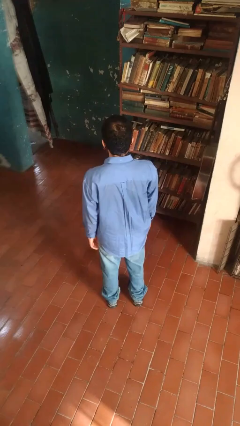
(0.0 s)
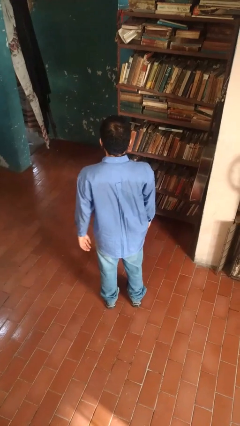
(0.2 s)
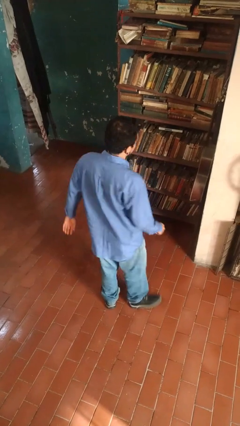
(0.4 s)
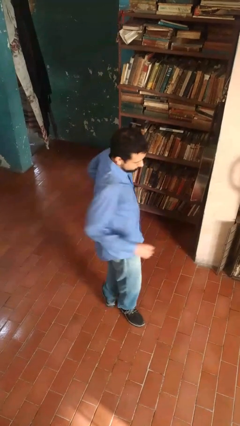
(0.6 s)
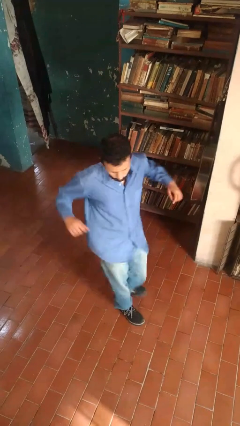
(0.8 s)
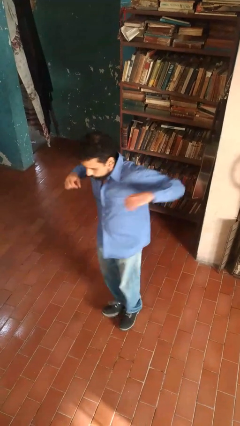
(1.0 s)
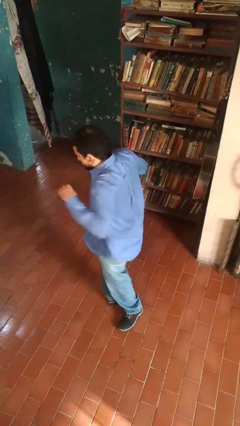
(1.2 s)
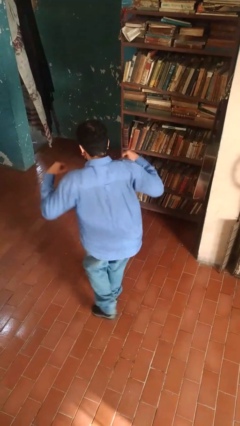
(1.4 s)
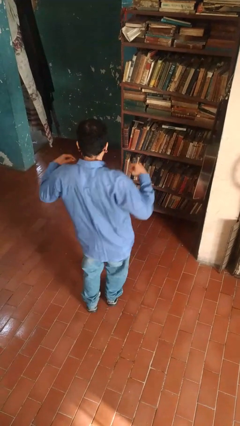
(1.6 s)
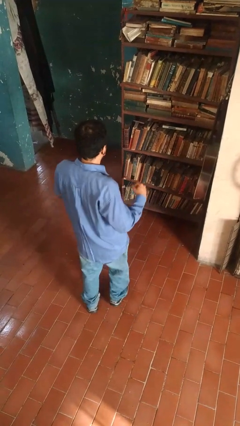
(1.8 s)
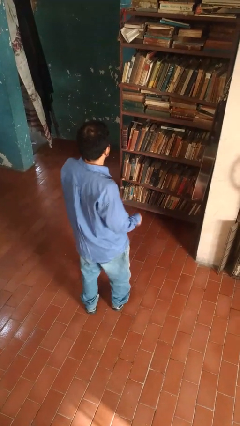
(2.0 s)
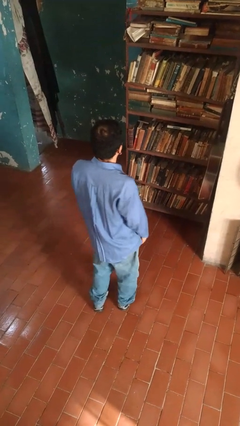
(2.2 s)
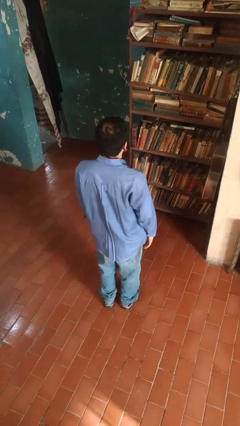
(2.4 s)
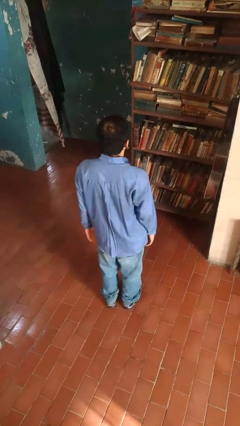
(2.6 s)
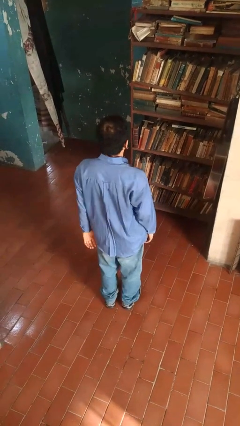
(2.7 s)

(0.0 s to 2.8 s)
person twirls

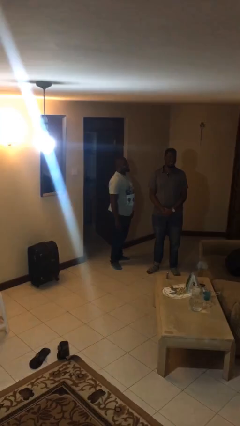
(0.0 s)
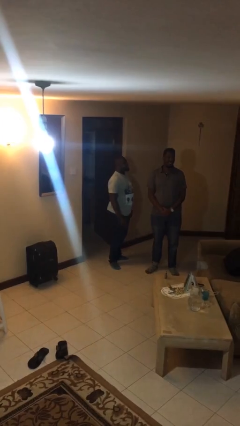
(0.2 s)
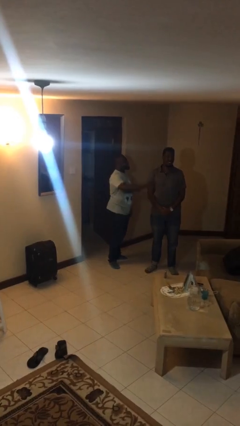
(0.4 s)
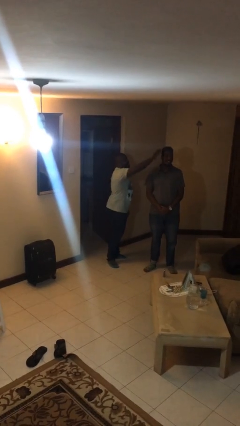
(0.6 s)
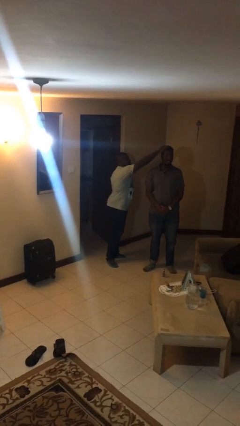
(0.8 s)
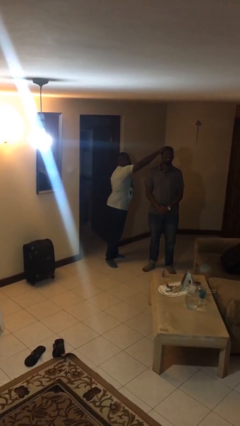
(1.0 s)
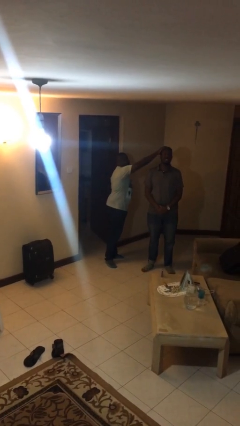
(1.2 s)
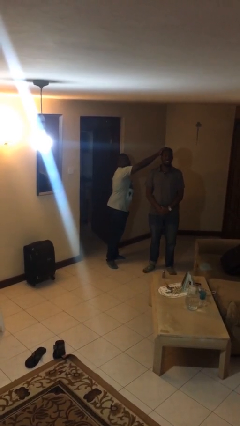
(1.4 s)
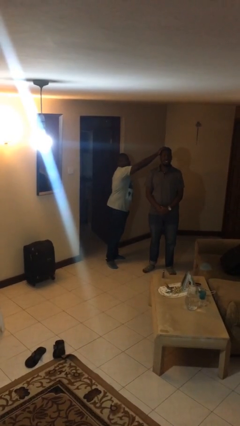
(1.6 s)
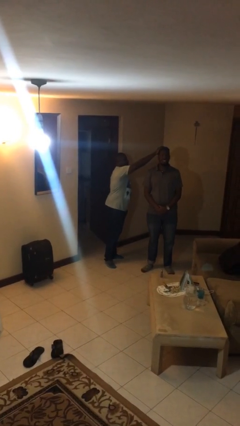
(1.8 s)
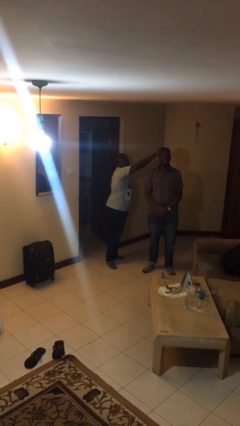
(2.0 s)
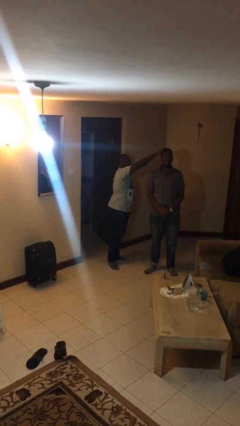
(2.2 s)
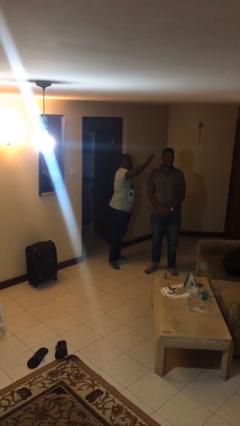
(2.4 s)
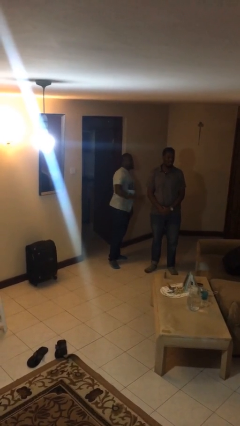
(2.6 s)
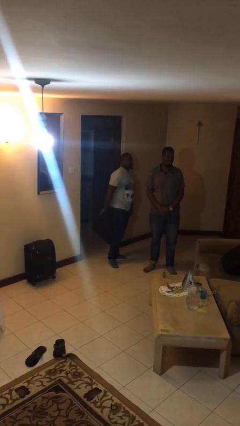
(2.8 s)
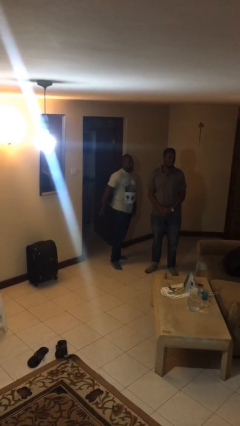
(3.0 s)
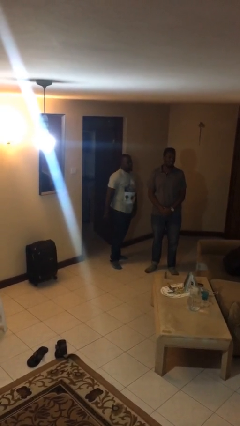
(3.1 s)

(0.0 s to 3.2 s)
person grabs person by hair

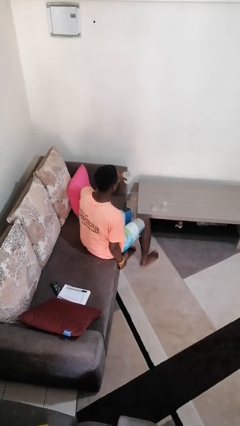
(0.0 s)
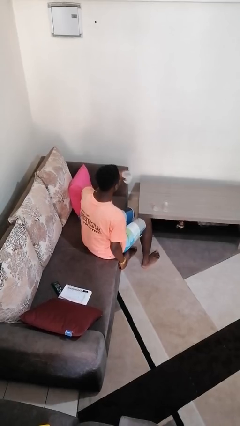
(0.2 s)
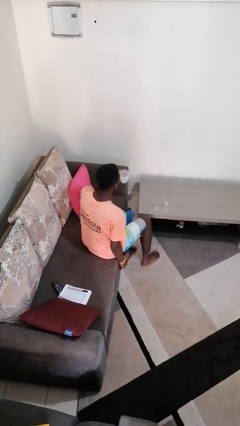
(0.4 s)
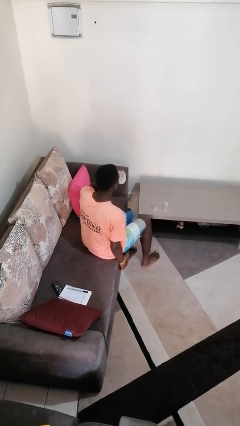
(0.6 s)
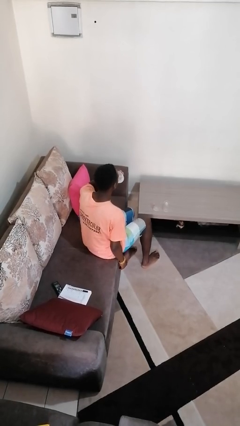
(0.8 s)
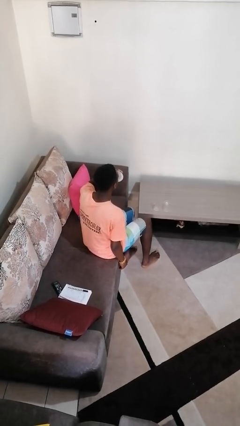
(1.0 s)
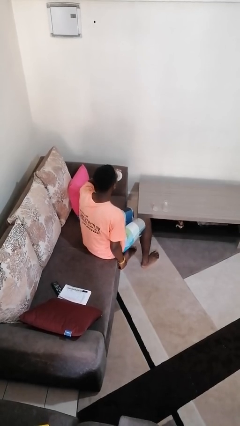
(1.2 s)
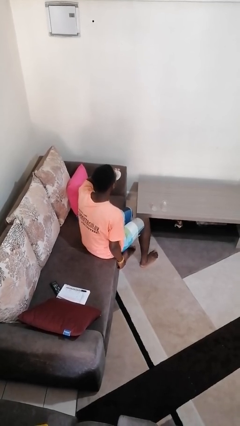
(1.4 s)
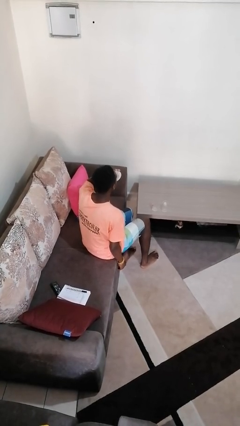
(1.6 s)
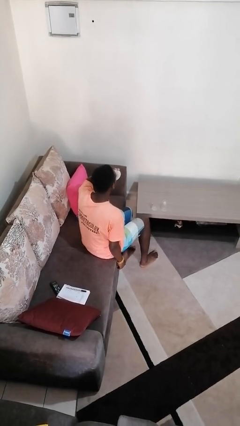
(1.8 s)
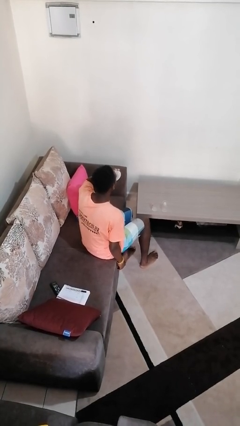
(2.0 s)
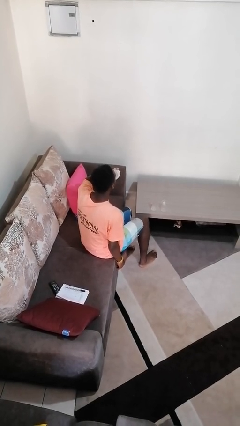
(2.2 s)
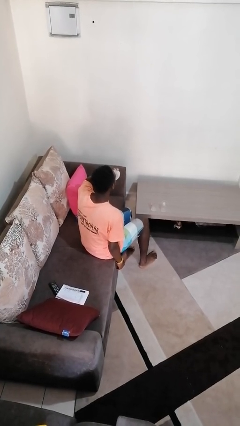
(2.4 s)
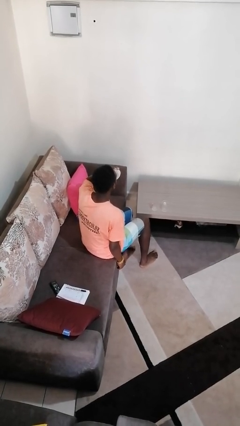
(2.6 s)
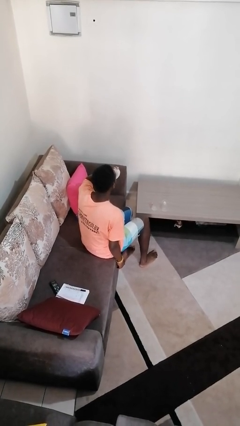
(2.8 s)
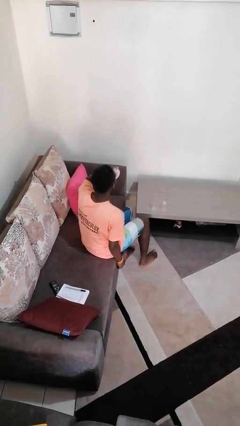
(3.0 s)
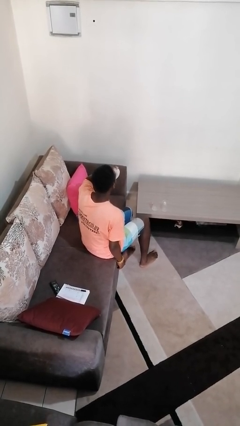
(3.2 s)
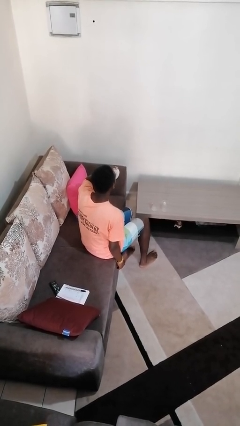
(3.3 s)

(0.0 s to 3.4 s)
person drinks from shotglass

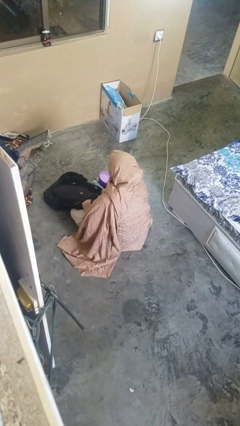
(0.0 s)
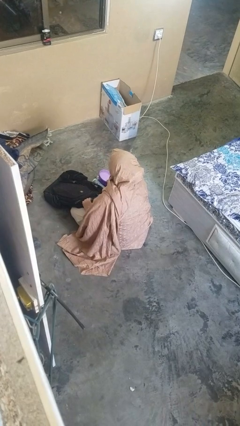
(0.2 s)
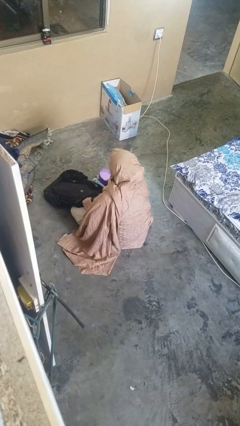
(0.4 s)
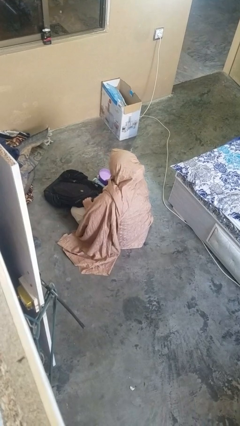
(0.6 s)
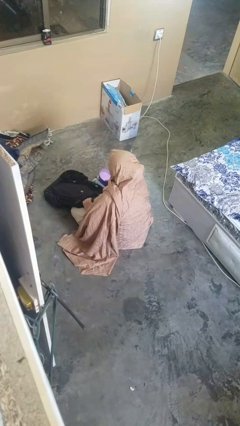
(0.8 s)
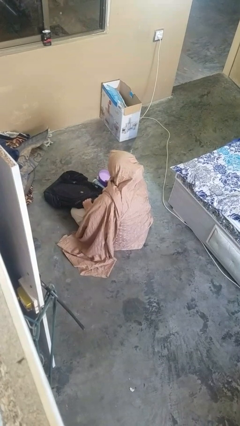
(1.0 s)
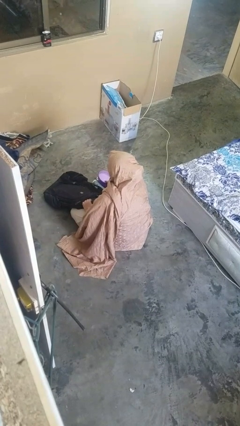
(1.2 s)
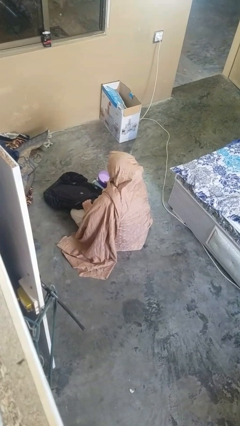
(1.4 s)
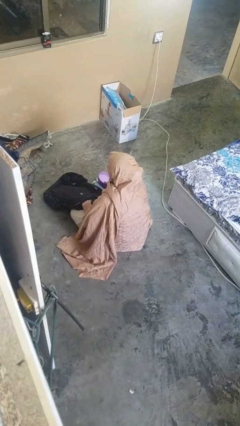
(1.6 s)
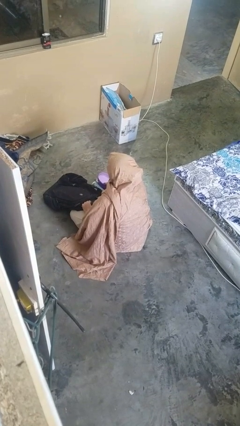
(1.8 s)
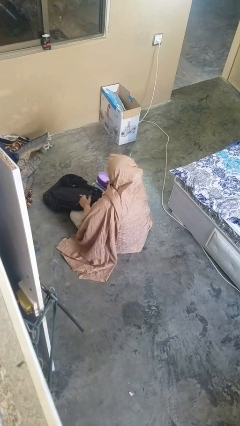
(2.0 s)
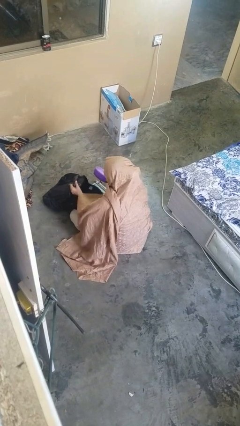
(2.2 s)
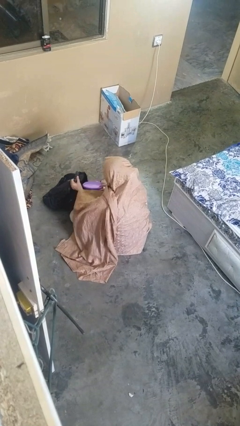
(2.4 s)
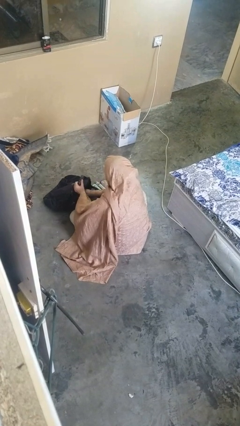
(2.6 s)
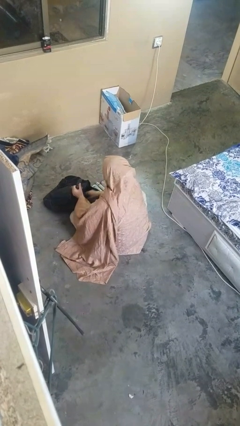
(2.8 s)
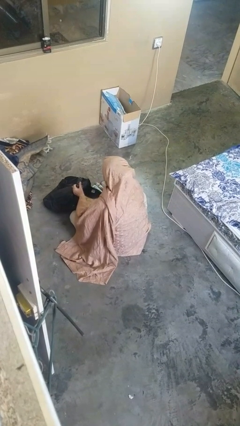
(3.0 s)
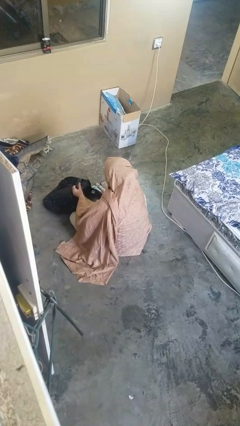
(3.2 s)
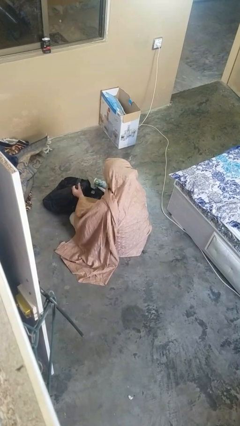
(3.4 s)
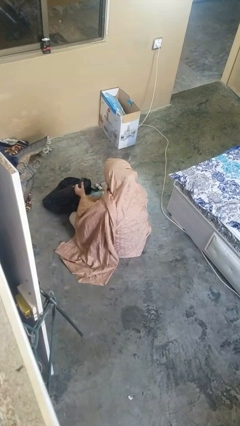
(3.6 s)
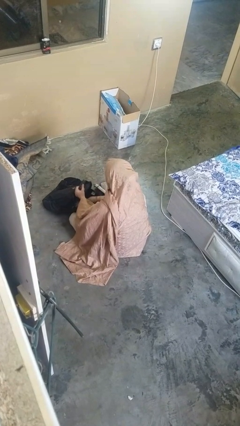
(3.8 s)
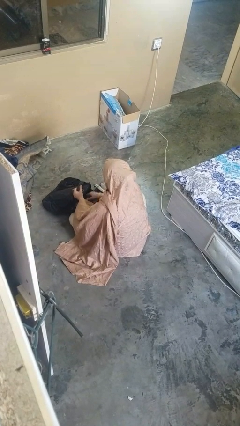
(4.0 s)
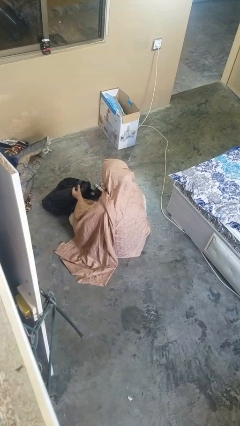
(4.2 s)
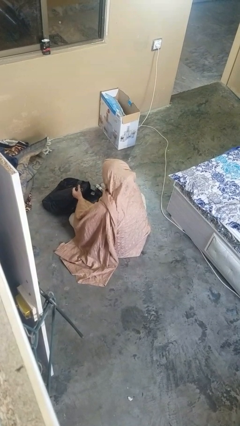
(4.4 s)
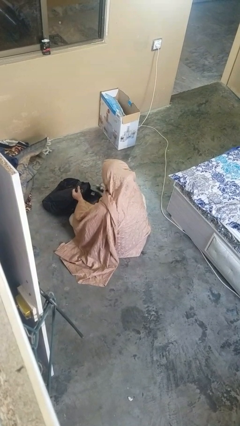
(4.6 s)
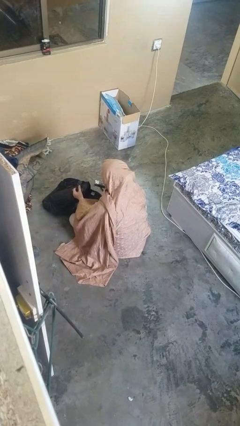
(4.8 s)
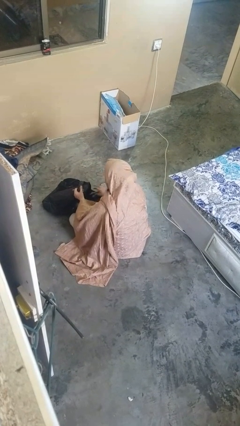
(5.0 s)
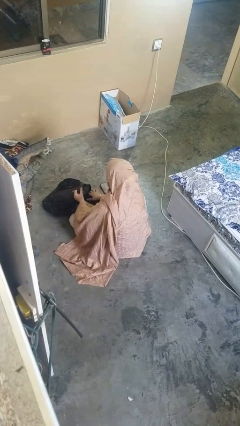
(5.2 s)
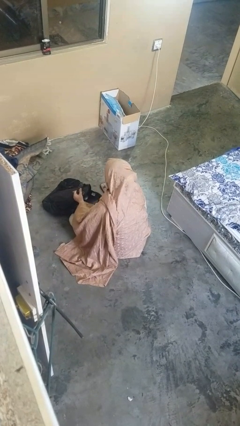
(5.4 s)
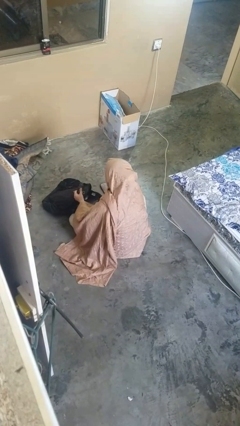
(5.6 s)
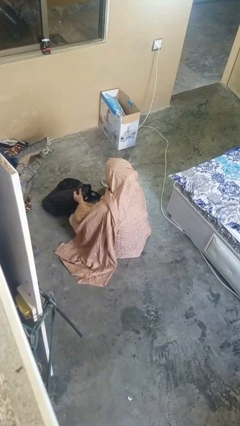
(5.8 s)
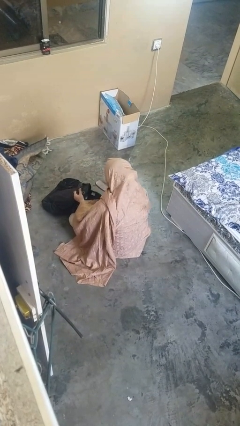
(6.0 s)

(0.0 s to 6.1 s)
person puts object into backpack

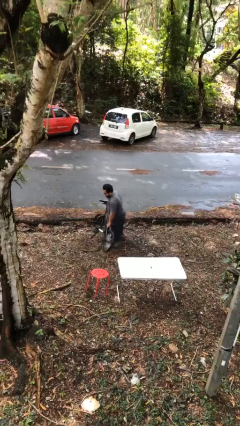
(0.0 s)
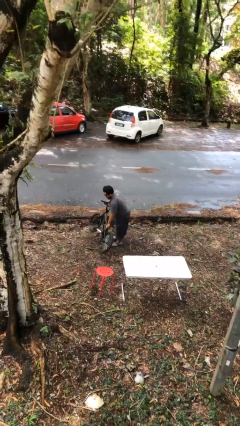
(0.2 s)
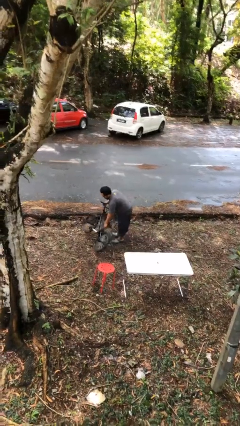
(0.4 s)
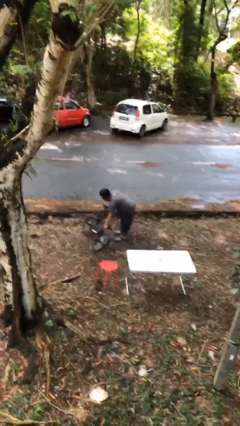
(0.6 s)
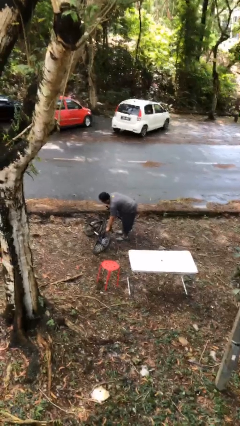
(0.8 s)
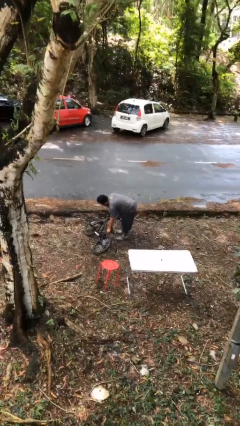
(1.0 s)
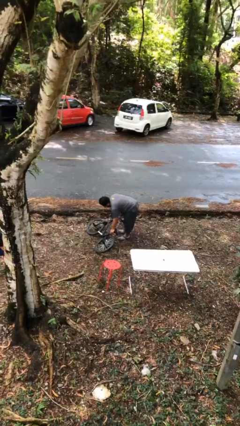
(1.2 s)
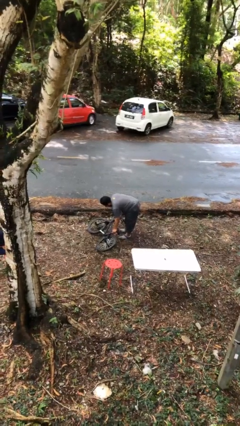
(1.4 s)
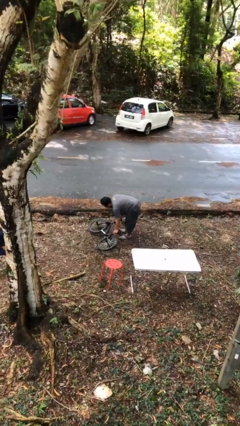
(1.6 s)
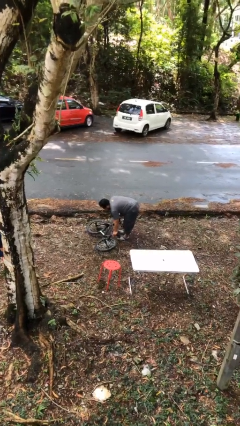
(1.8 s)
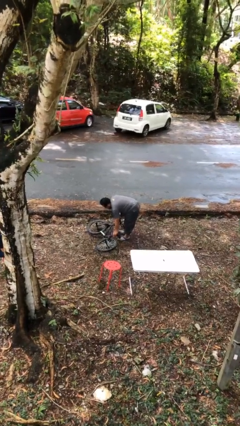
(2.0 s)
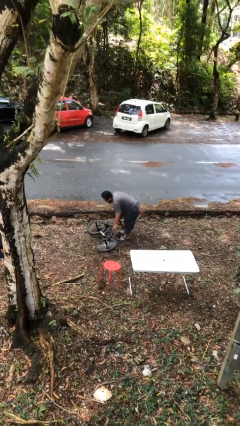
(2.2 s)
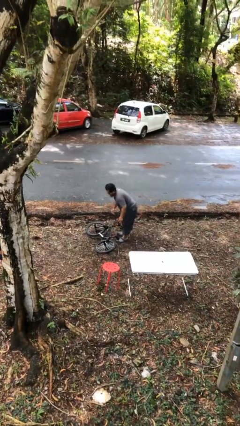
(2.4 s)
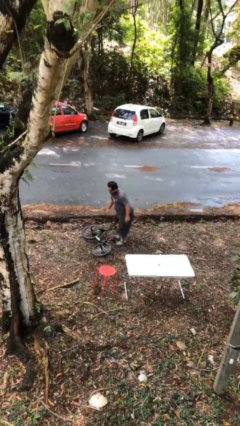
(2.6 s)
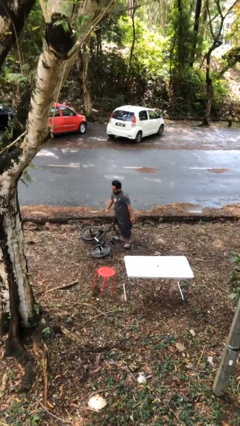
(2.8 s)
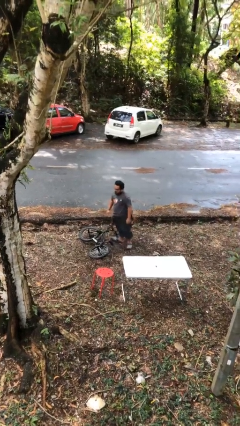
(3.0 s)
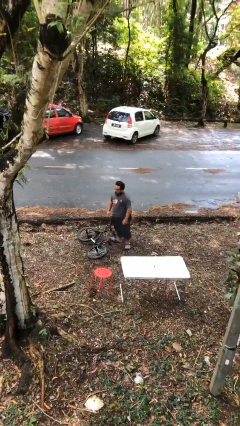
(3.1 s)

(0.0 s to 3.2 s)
person puts down object on floor
